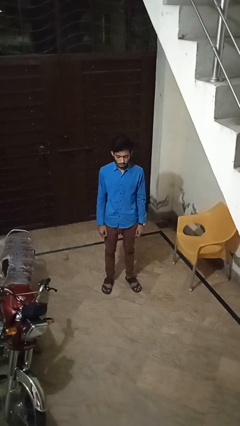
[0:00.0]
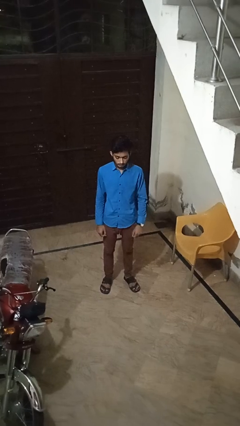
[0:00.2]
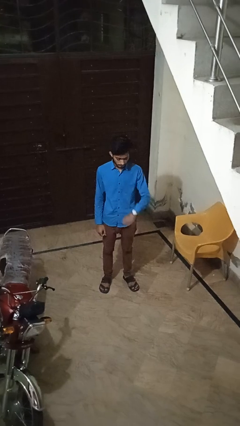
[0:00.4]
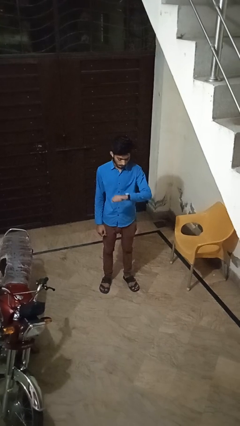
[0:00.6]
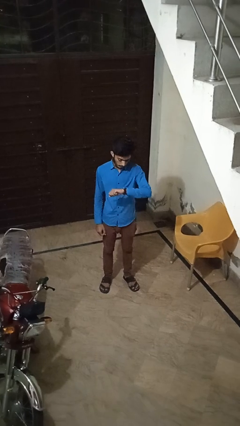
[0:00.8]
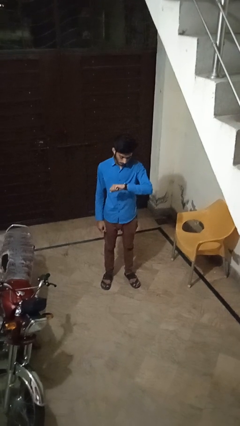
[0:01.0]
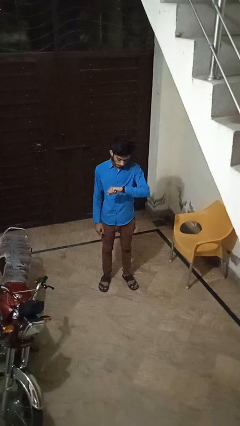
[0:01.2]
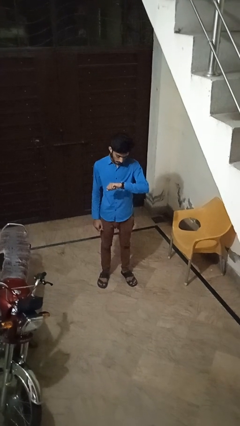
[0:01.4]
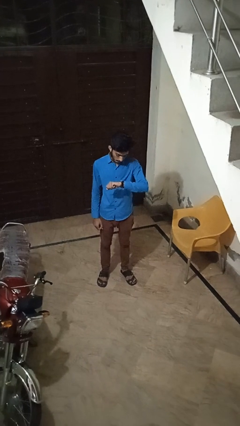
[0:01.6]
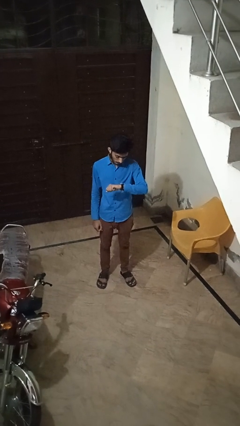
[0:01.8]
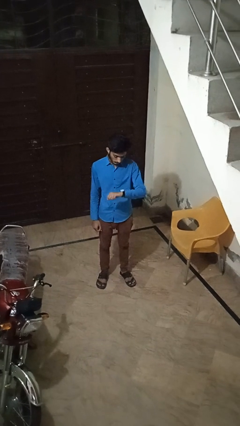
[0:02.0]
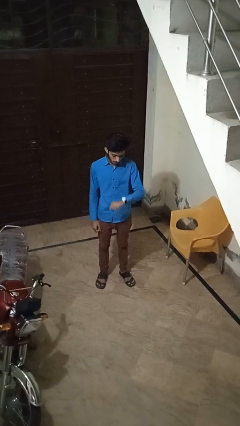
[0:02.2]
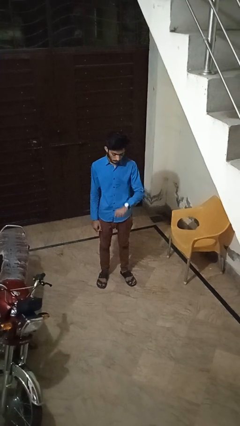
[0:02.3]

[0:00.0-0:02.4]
person looks at wristwatch

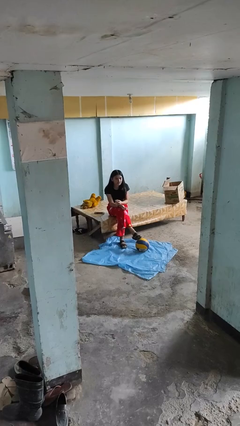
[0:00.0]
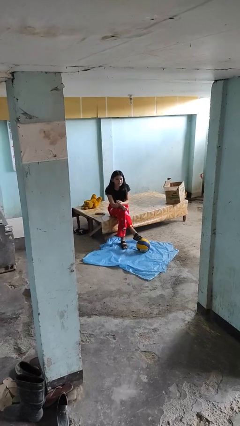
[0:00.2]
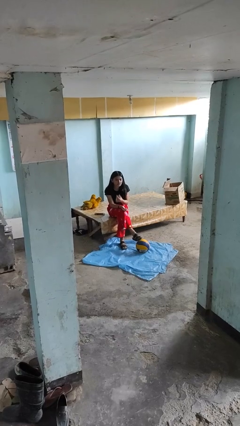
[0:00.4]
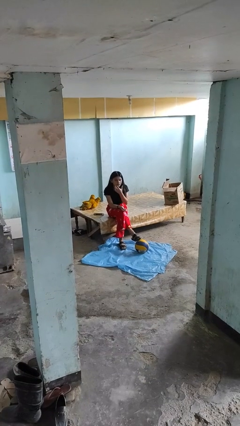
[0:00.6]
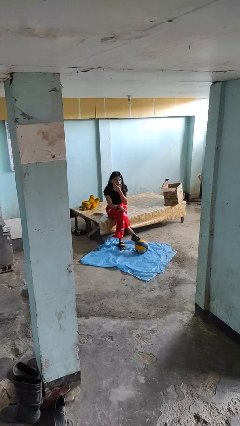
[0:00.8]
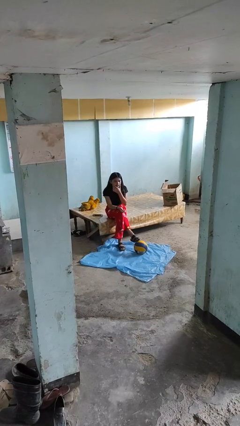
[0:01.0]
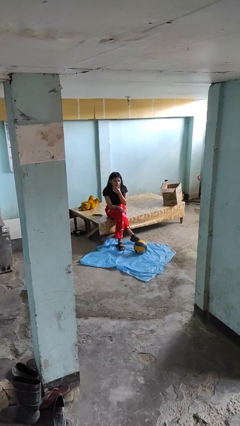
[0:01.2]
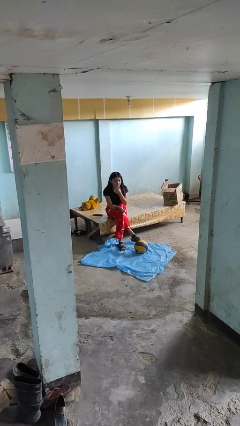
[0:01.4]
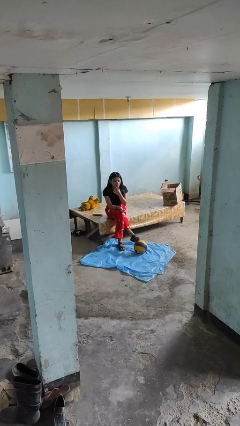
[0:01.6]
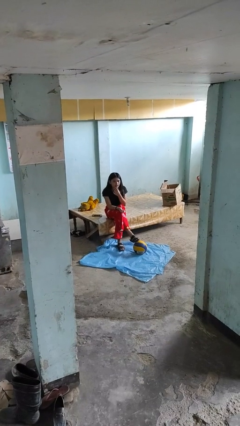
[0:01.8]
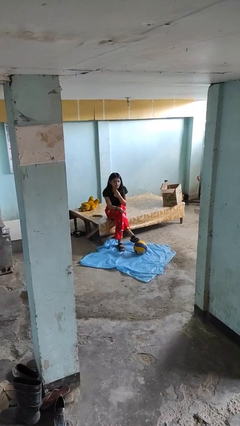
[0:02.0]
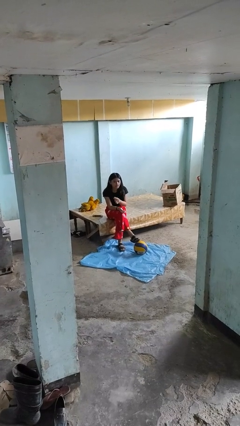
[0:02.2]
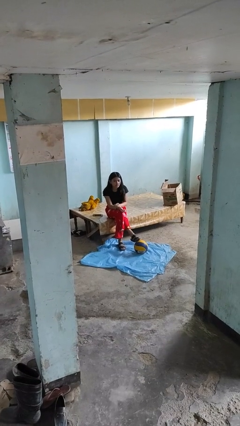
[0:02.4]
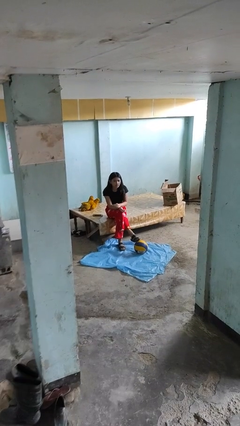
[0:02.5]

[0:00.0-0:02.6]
person strokes chin

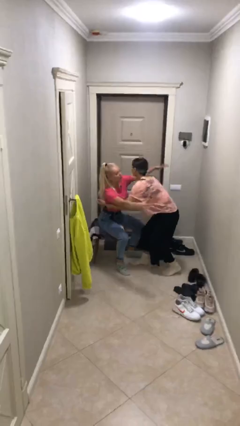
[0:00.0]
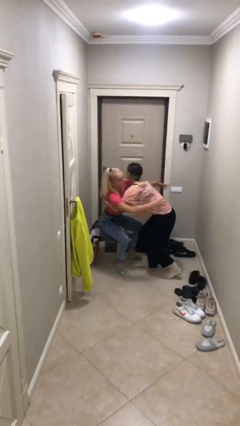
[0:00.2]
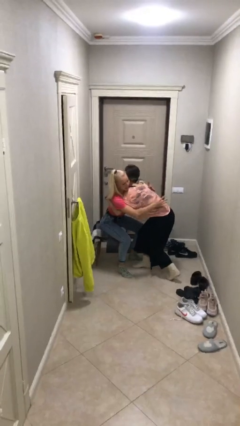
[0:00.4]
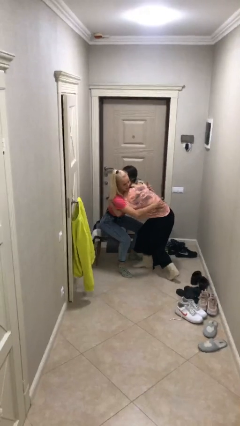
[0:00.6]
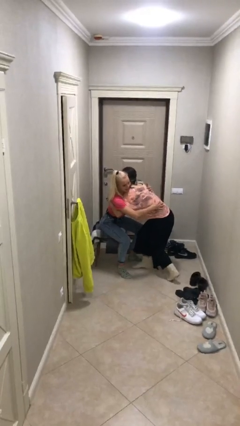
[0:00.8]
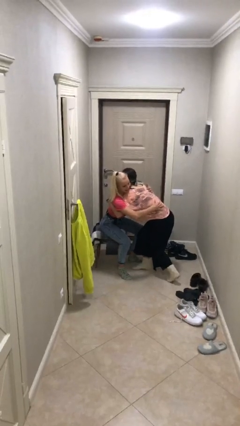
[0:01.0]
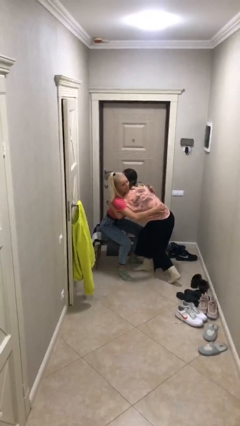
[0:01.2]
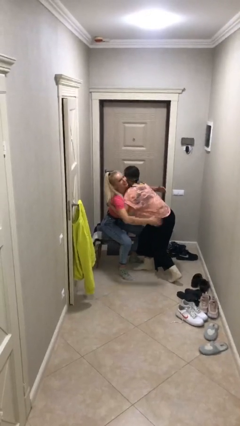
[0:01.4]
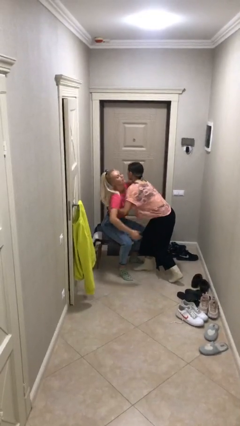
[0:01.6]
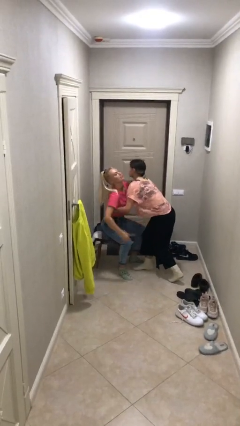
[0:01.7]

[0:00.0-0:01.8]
person embraces person

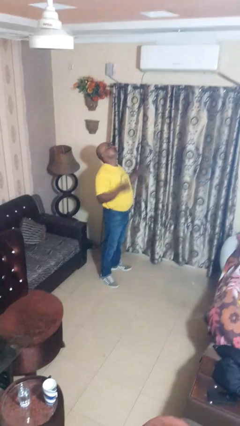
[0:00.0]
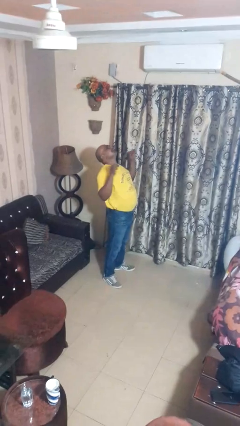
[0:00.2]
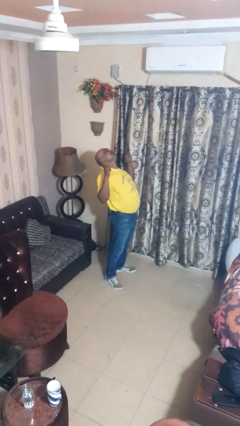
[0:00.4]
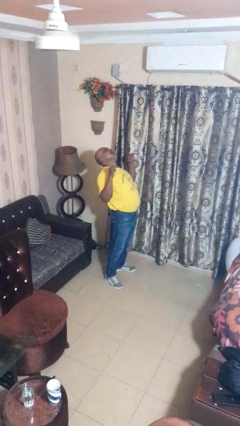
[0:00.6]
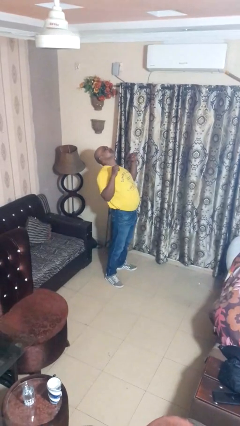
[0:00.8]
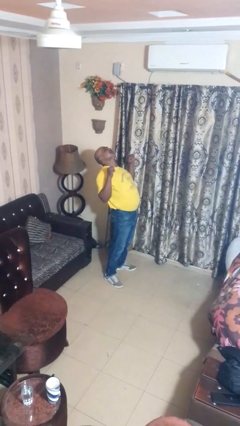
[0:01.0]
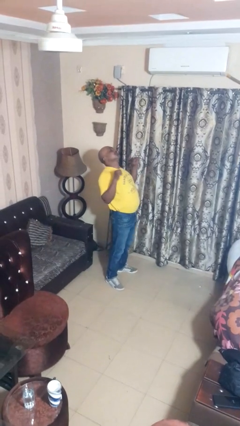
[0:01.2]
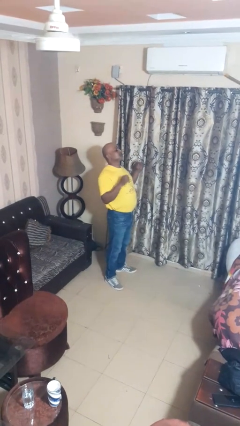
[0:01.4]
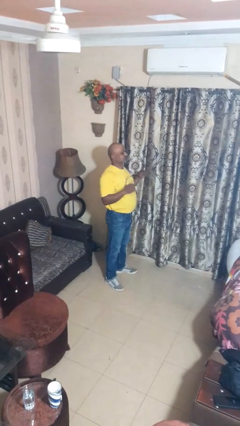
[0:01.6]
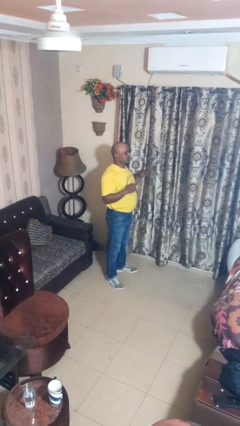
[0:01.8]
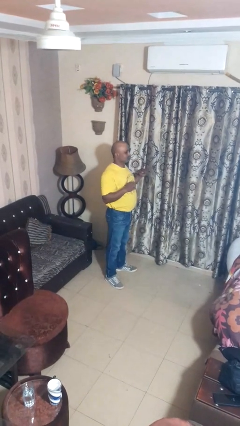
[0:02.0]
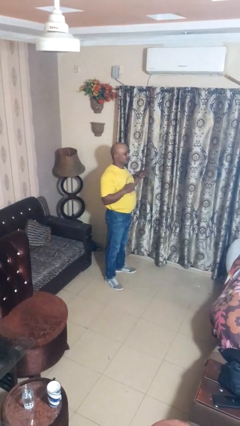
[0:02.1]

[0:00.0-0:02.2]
person stretches arms to side

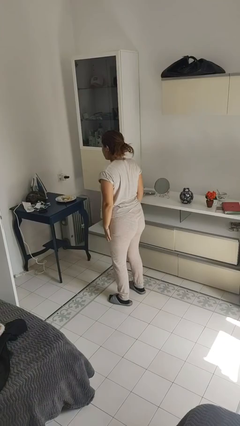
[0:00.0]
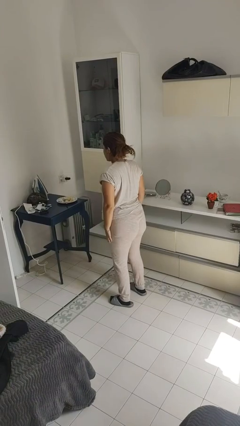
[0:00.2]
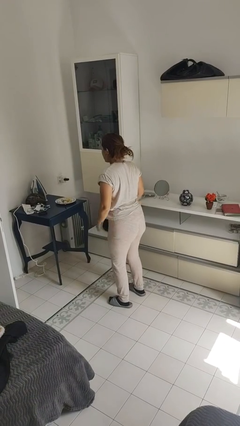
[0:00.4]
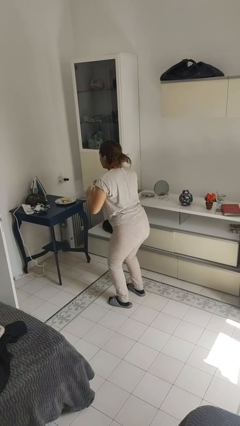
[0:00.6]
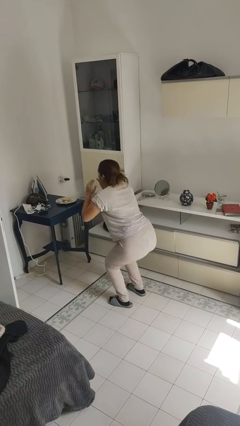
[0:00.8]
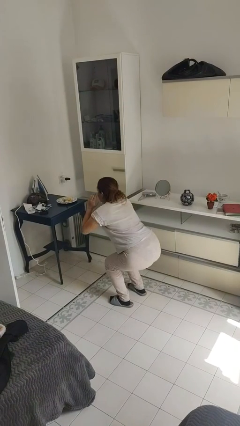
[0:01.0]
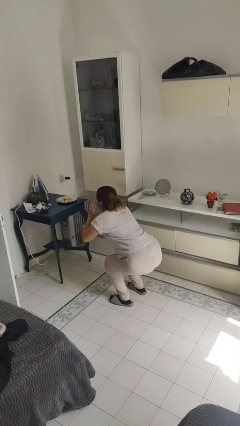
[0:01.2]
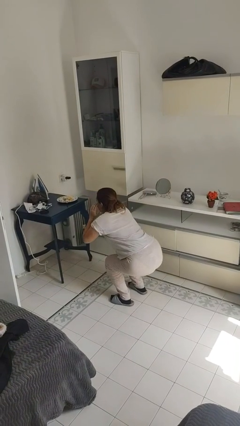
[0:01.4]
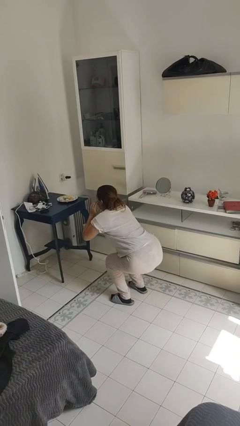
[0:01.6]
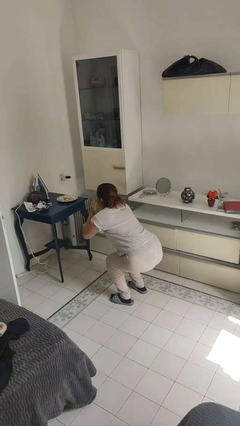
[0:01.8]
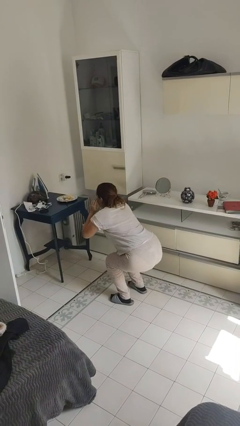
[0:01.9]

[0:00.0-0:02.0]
person squats

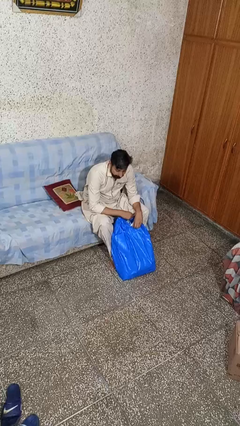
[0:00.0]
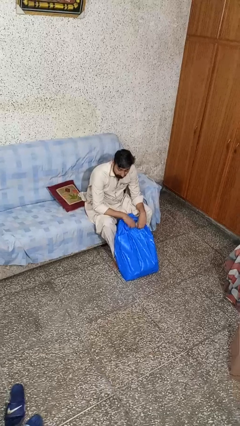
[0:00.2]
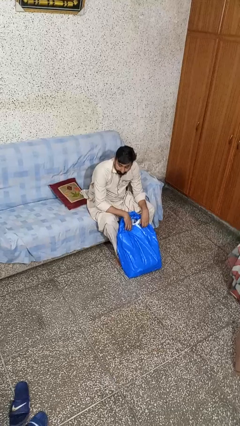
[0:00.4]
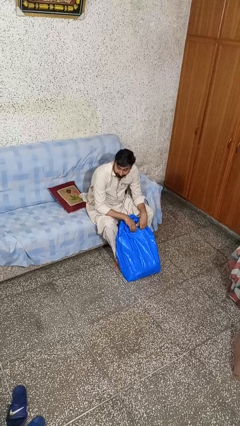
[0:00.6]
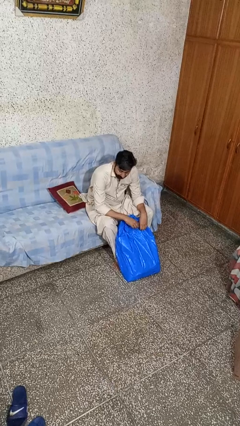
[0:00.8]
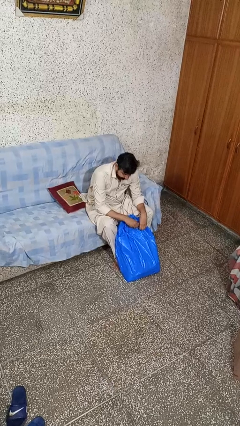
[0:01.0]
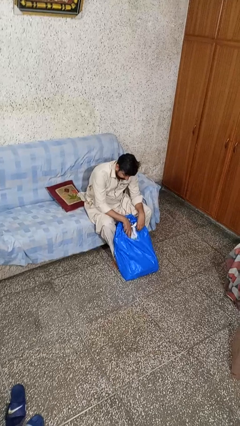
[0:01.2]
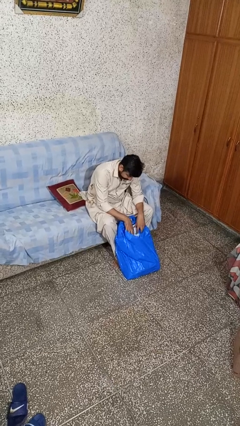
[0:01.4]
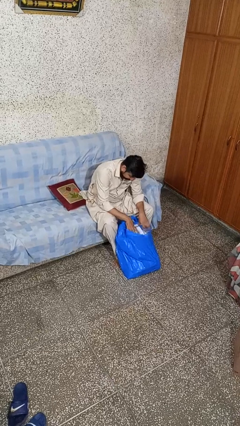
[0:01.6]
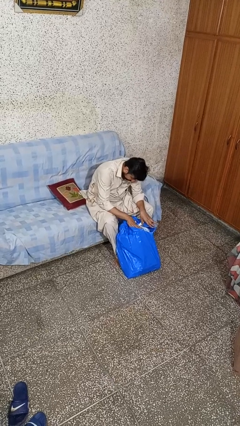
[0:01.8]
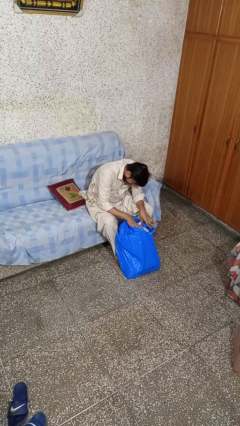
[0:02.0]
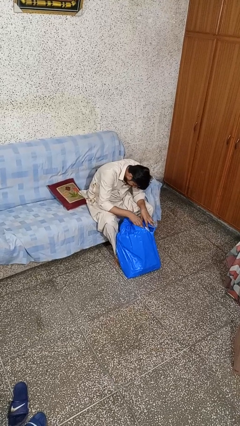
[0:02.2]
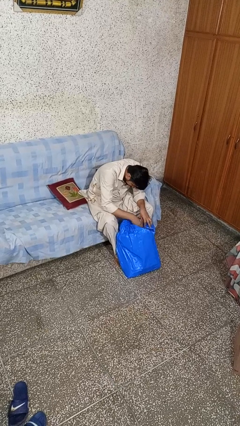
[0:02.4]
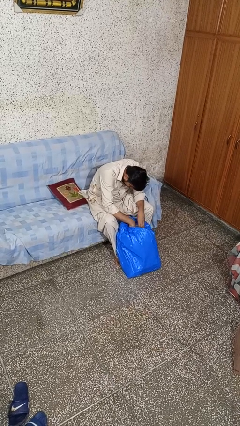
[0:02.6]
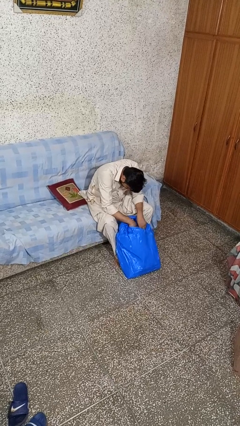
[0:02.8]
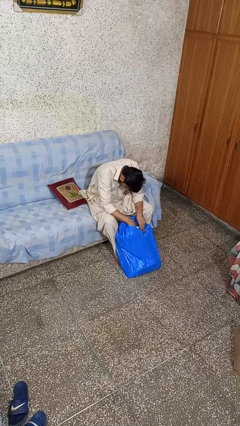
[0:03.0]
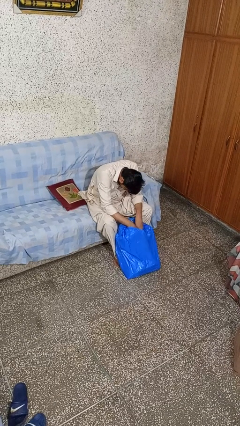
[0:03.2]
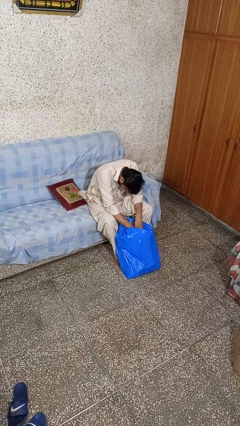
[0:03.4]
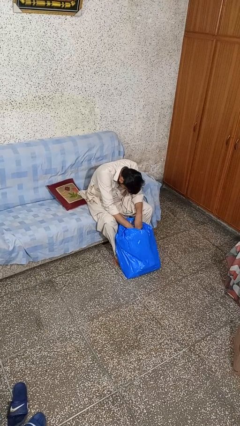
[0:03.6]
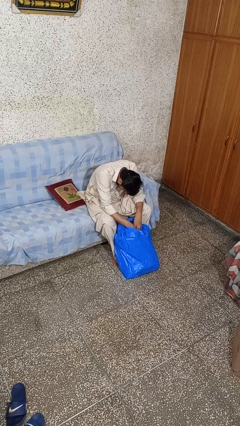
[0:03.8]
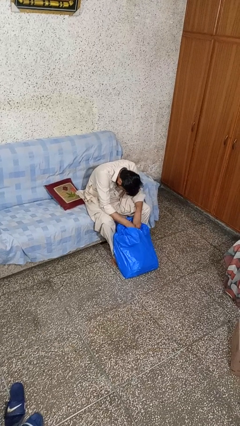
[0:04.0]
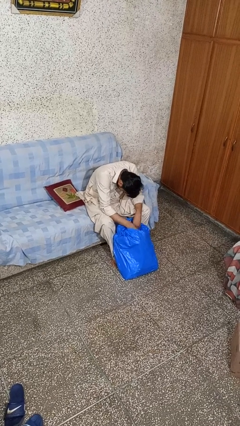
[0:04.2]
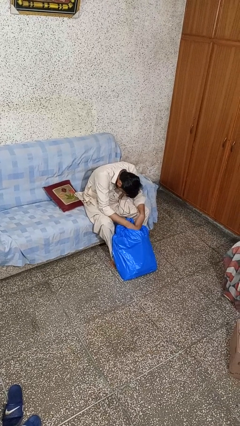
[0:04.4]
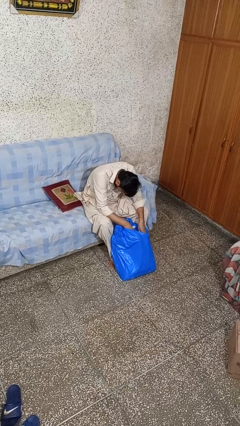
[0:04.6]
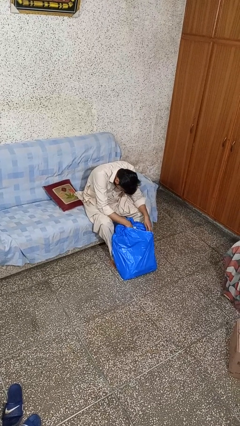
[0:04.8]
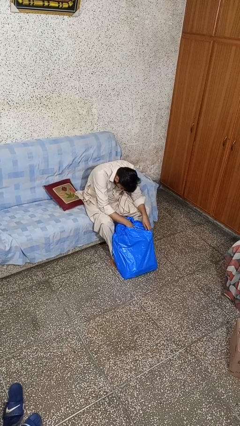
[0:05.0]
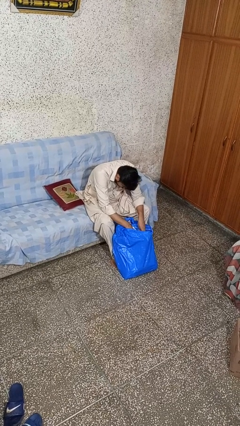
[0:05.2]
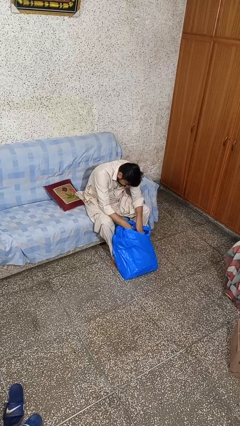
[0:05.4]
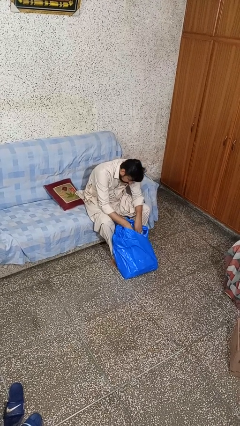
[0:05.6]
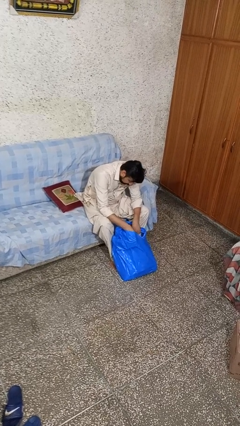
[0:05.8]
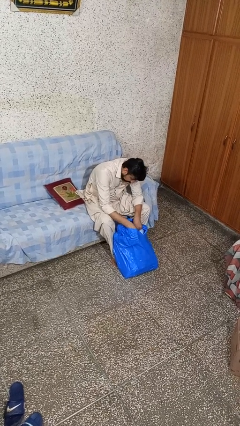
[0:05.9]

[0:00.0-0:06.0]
person searches in bag

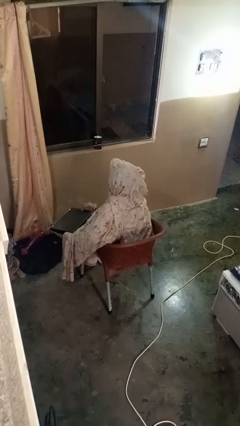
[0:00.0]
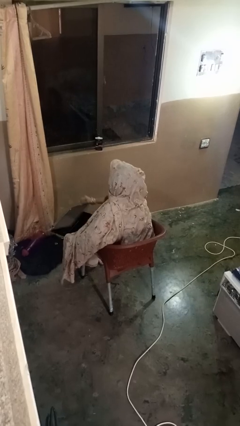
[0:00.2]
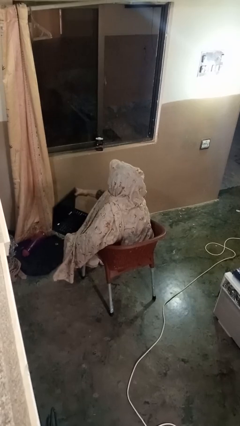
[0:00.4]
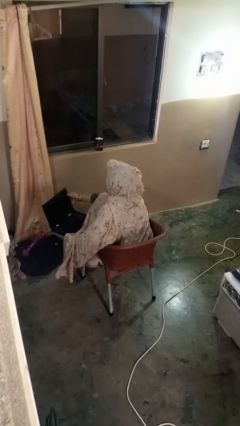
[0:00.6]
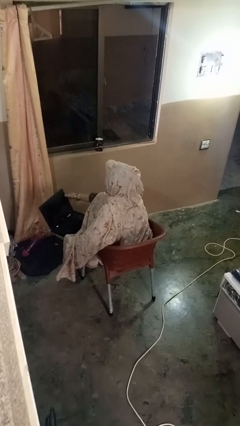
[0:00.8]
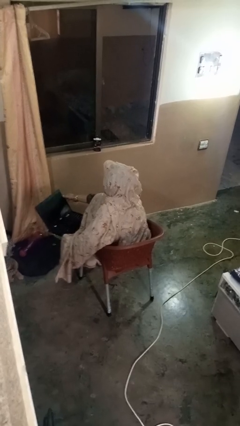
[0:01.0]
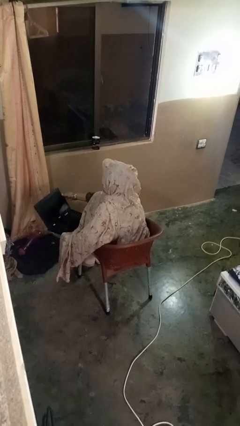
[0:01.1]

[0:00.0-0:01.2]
person opens laptop
